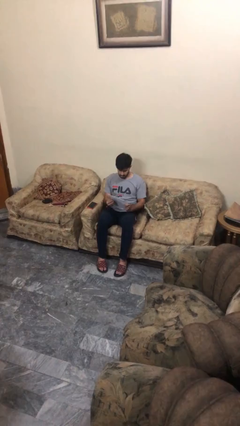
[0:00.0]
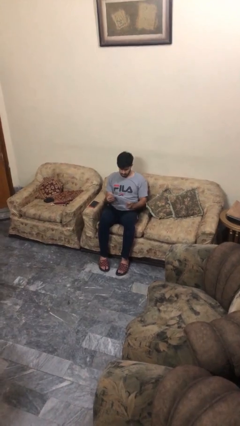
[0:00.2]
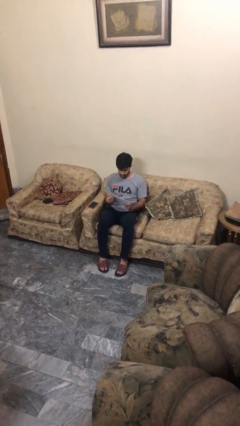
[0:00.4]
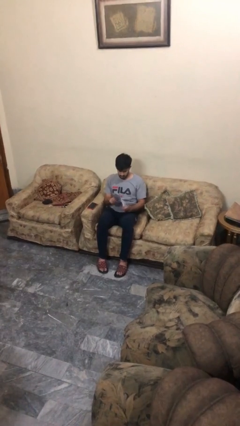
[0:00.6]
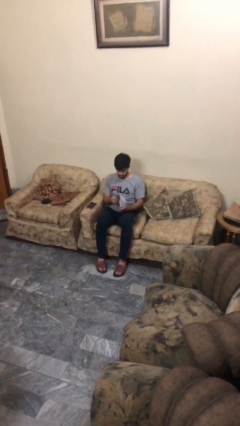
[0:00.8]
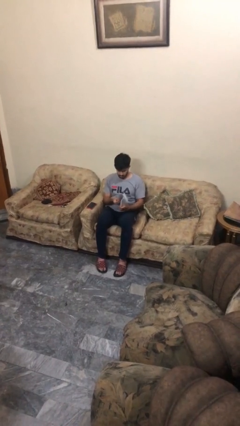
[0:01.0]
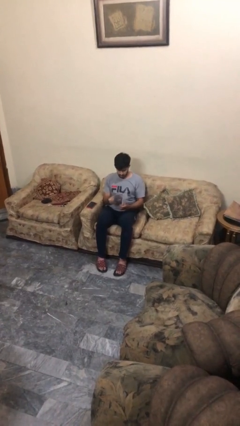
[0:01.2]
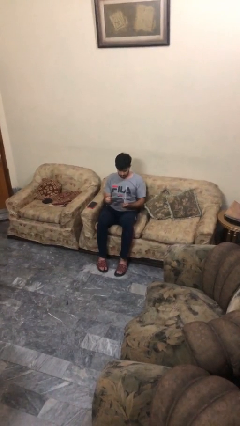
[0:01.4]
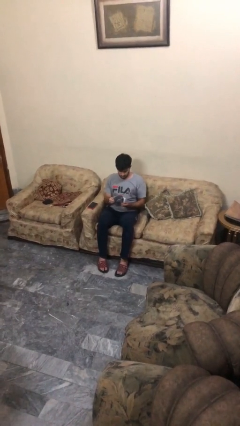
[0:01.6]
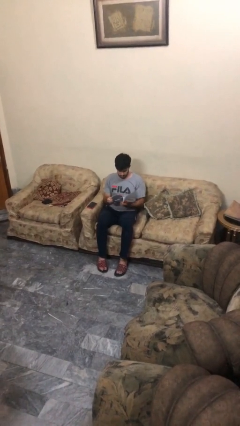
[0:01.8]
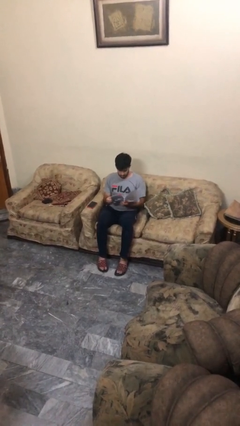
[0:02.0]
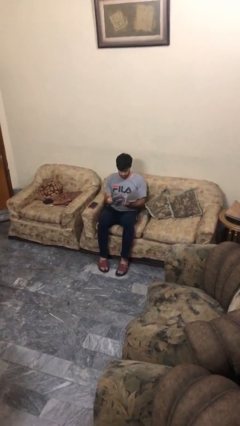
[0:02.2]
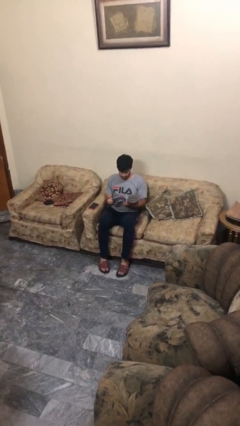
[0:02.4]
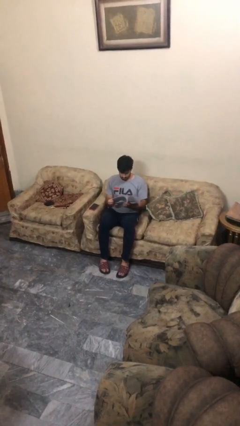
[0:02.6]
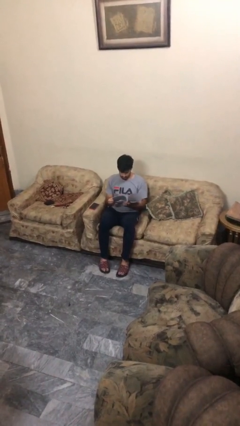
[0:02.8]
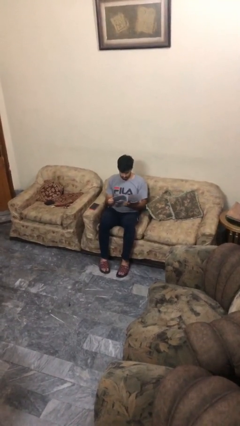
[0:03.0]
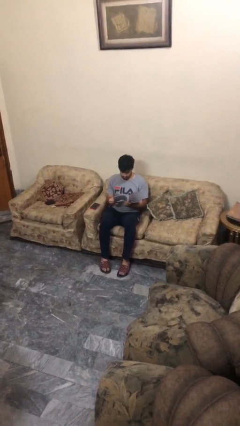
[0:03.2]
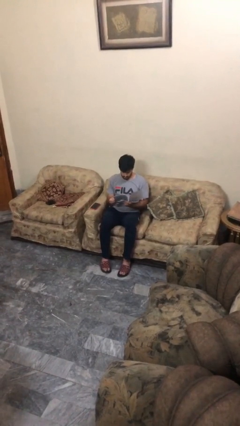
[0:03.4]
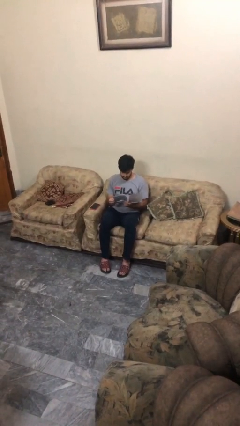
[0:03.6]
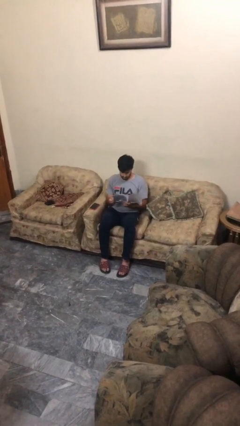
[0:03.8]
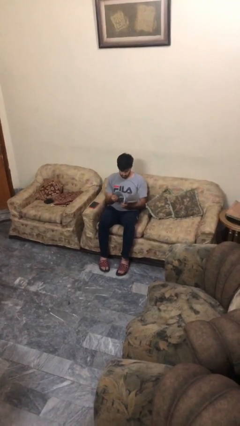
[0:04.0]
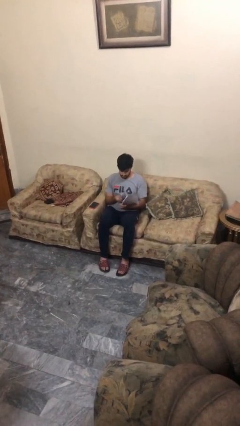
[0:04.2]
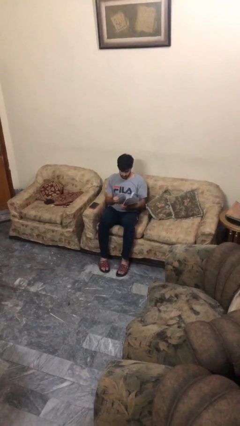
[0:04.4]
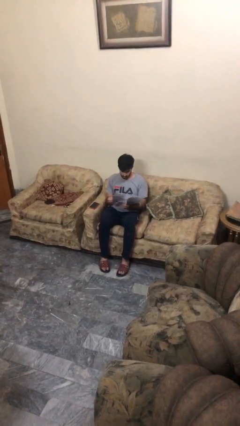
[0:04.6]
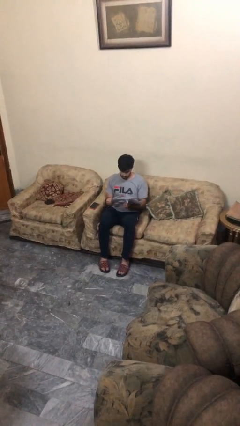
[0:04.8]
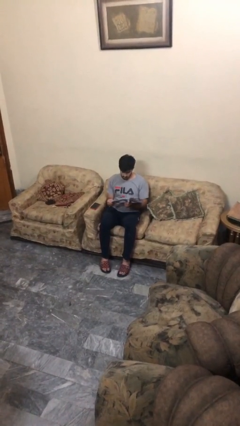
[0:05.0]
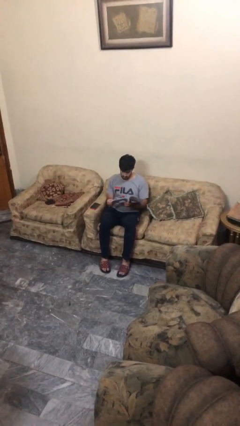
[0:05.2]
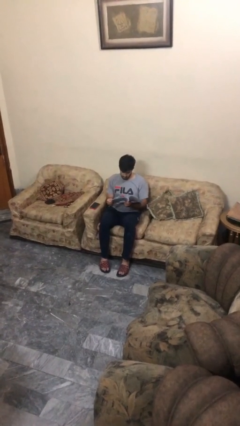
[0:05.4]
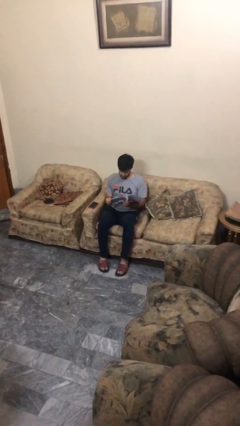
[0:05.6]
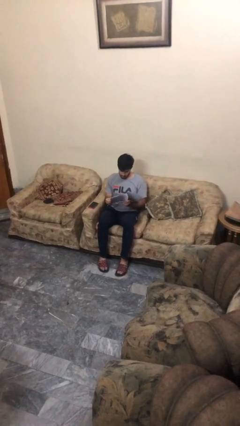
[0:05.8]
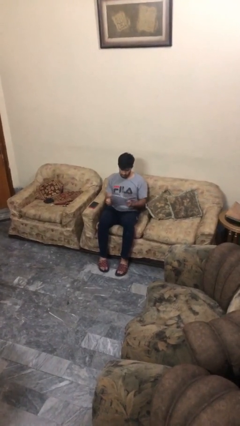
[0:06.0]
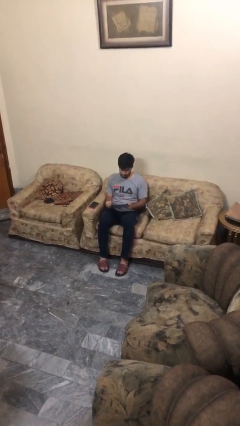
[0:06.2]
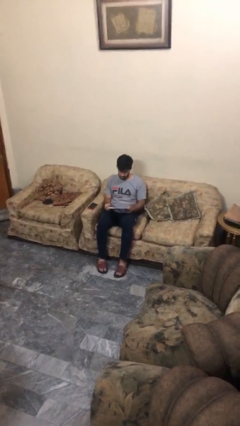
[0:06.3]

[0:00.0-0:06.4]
person reads magazine

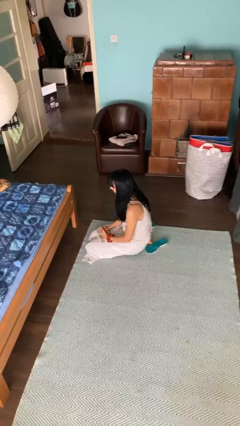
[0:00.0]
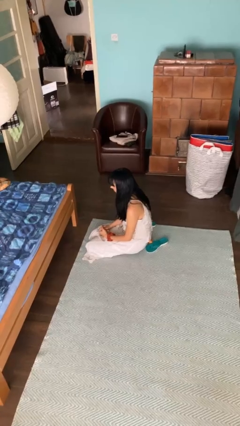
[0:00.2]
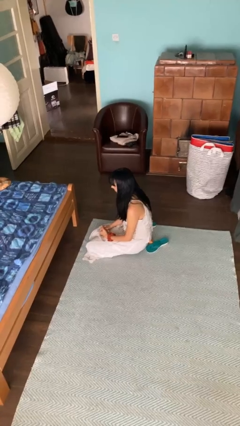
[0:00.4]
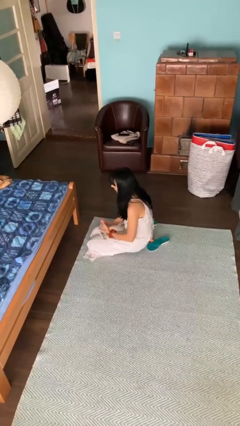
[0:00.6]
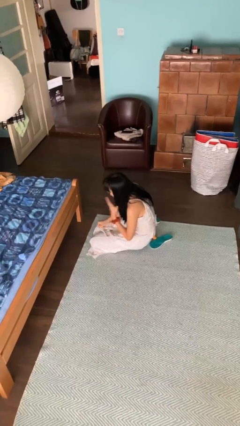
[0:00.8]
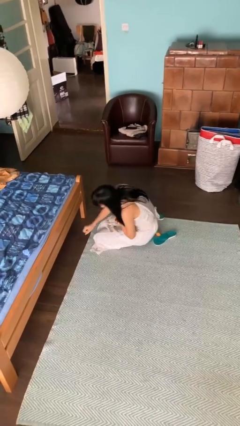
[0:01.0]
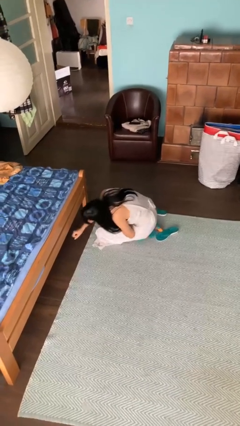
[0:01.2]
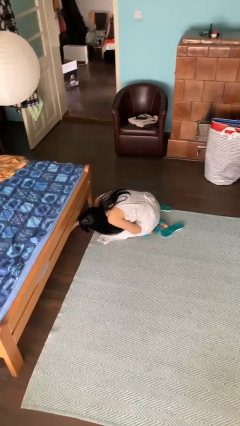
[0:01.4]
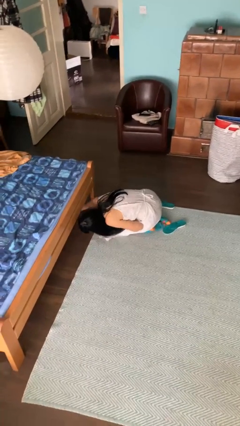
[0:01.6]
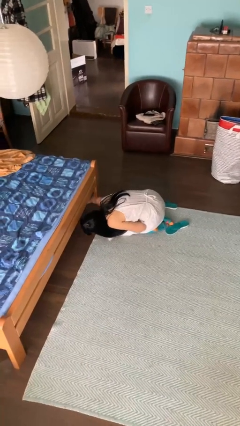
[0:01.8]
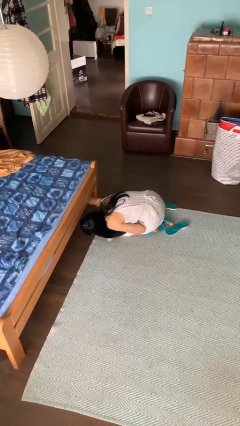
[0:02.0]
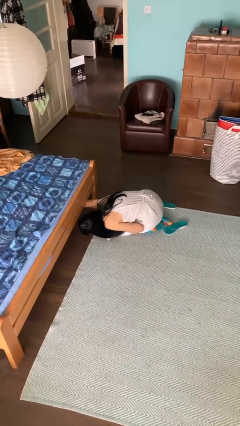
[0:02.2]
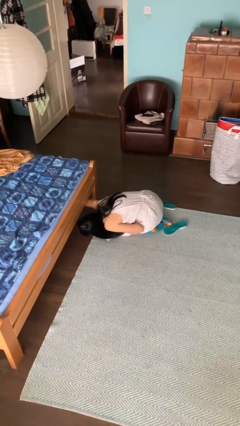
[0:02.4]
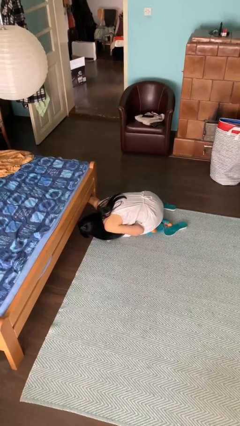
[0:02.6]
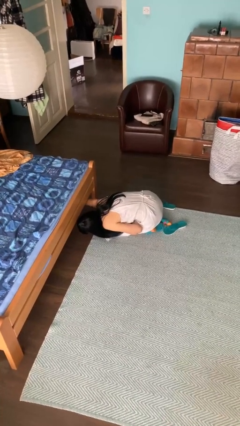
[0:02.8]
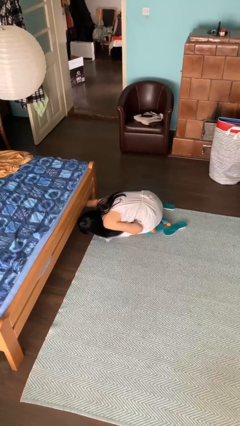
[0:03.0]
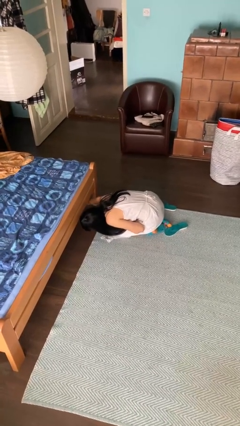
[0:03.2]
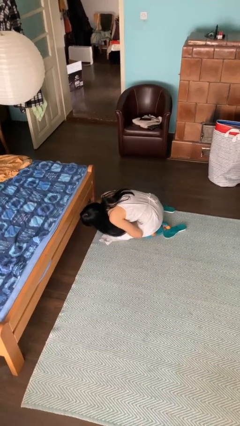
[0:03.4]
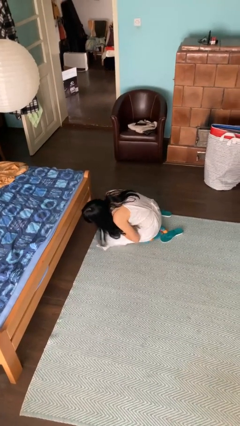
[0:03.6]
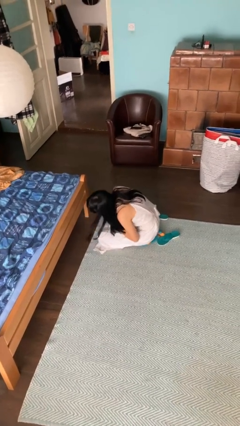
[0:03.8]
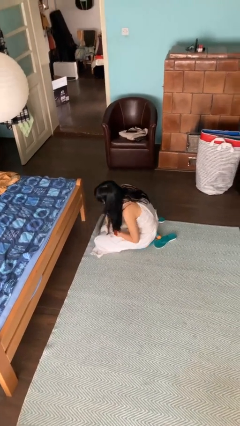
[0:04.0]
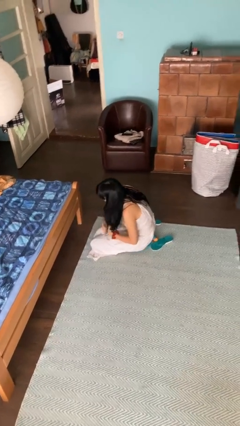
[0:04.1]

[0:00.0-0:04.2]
person searches under bed

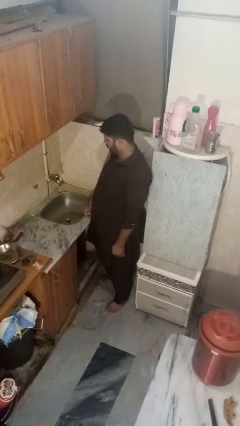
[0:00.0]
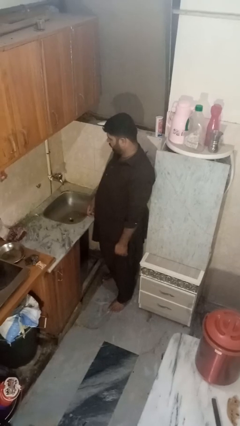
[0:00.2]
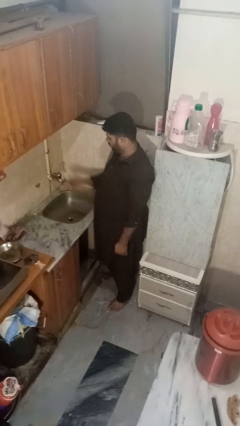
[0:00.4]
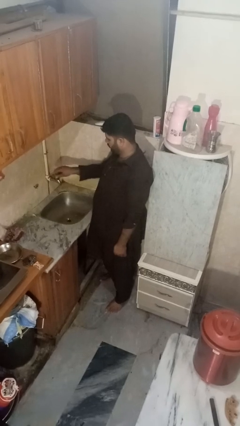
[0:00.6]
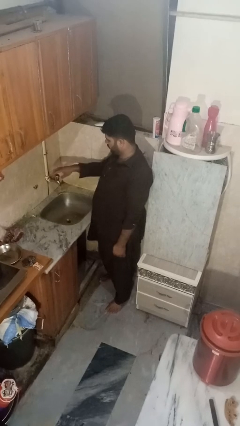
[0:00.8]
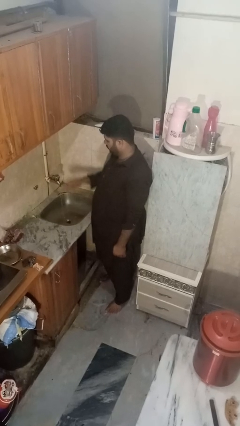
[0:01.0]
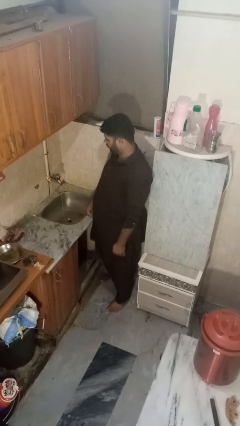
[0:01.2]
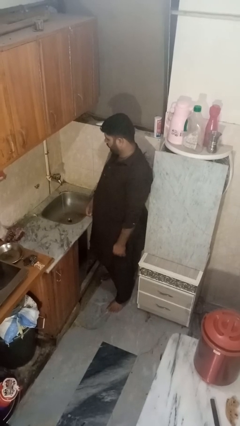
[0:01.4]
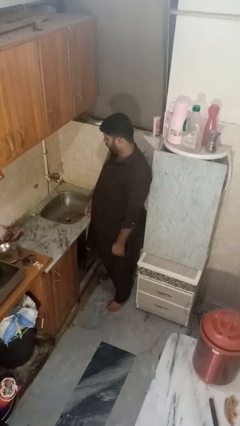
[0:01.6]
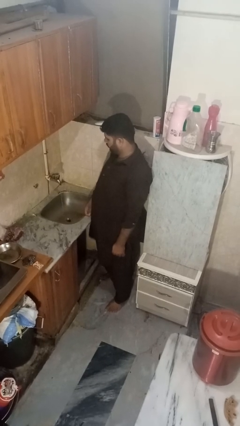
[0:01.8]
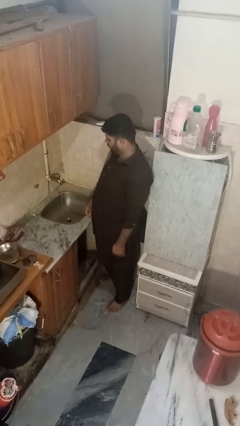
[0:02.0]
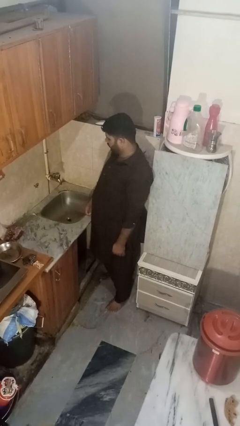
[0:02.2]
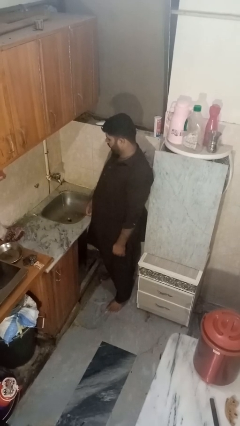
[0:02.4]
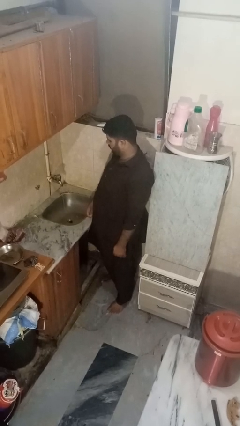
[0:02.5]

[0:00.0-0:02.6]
person turns on faucet

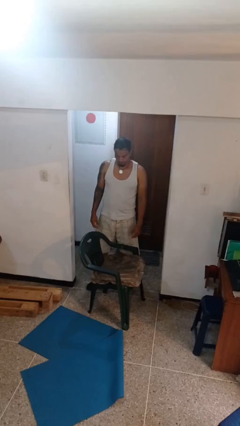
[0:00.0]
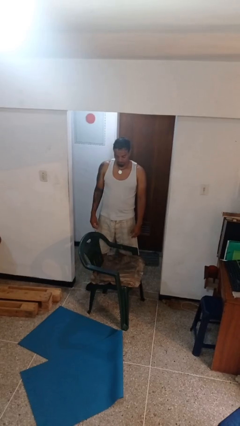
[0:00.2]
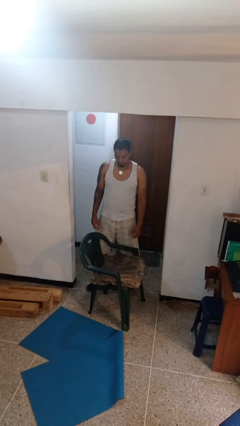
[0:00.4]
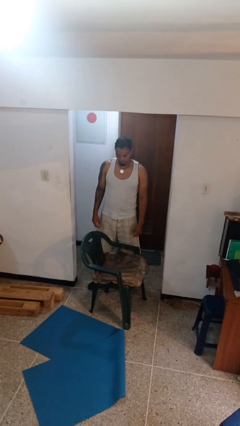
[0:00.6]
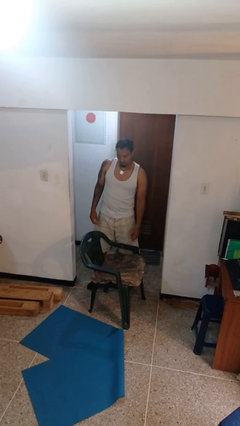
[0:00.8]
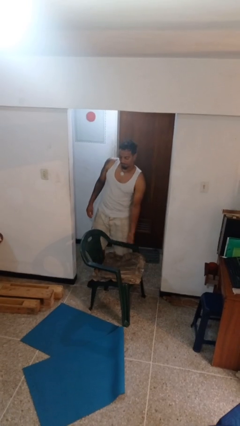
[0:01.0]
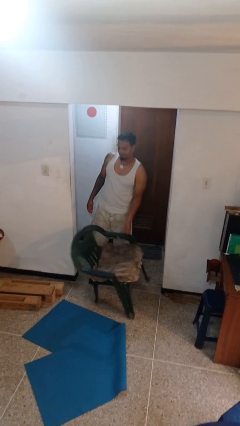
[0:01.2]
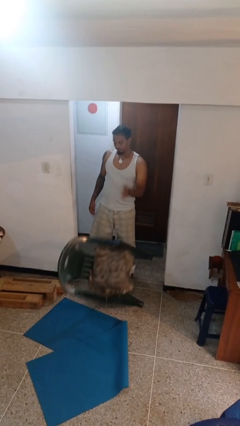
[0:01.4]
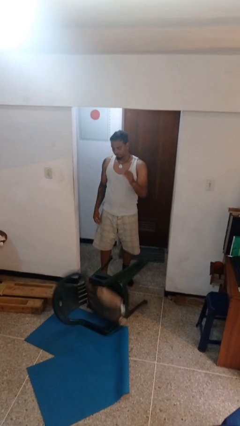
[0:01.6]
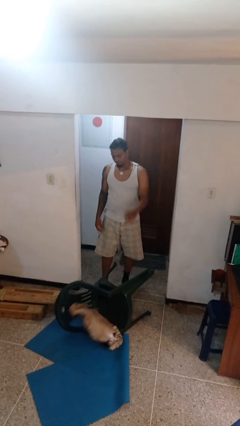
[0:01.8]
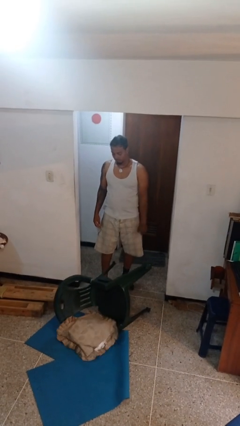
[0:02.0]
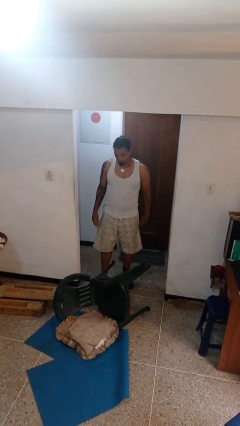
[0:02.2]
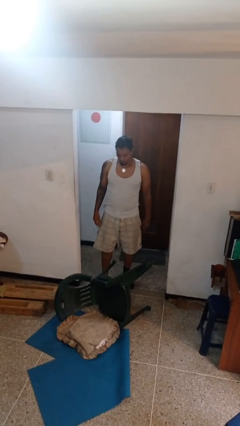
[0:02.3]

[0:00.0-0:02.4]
person knocks over furniture

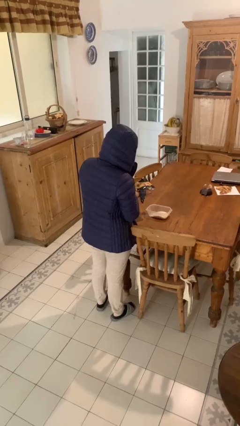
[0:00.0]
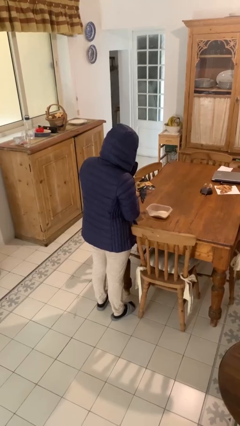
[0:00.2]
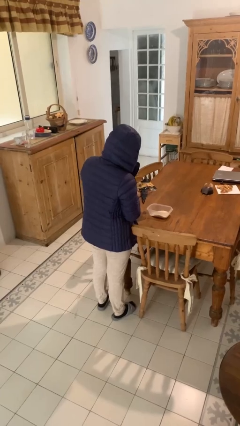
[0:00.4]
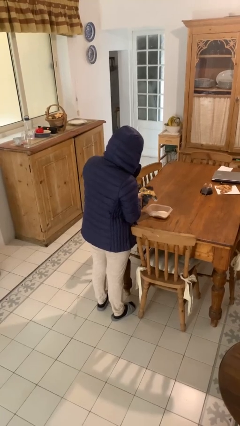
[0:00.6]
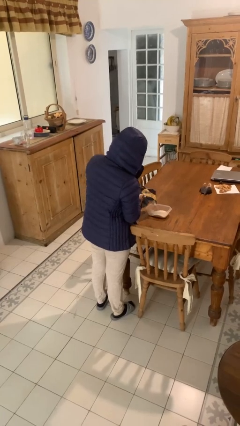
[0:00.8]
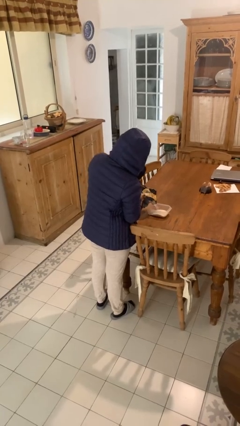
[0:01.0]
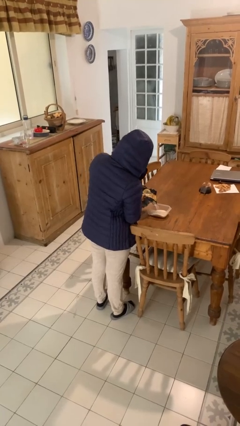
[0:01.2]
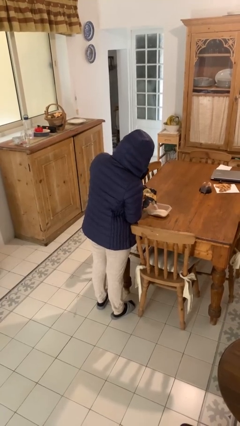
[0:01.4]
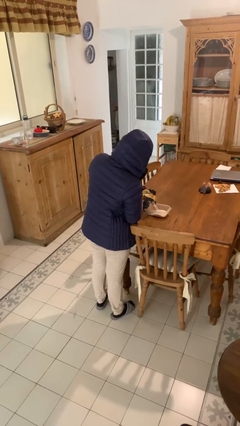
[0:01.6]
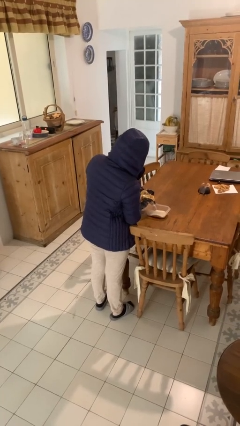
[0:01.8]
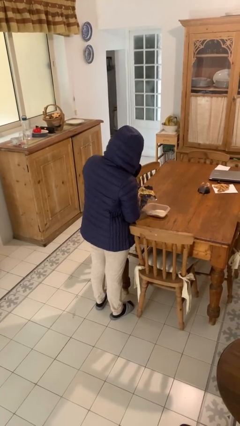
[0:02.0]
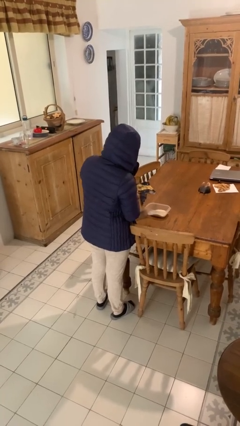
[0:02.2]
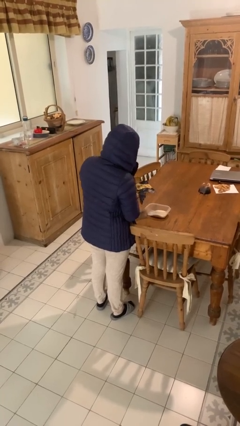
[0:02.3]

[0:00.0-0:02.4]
person pours into bowl
